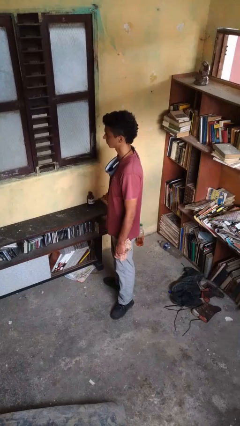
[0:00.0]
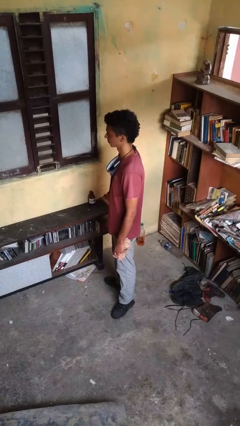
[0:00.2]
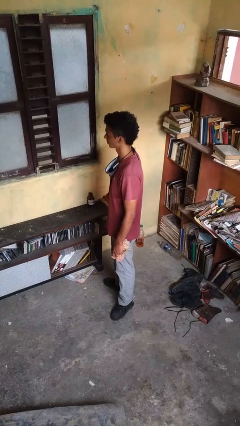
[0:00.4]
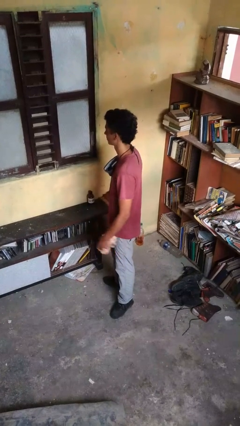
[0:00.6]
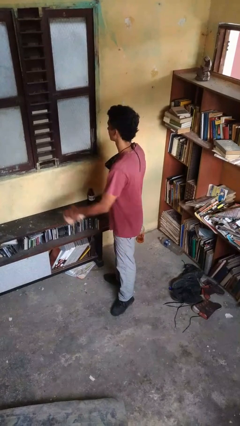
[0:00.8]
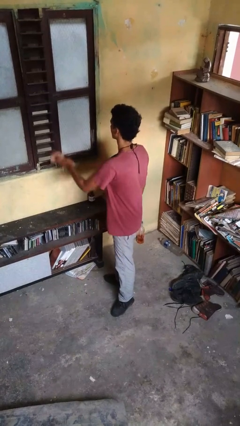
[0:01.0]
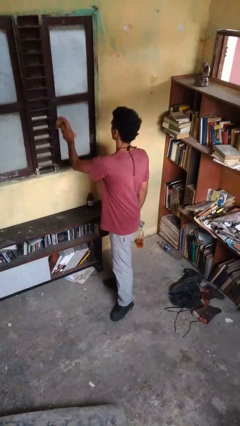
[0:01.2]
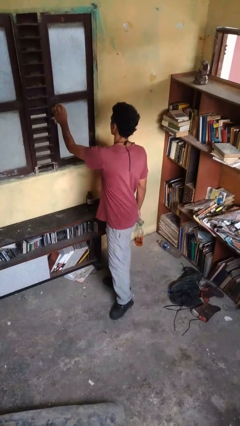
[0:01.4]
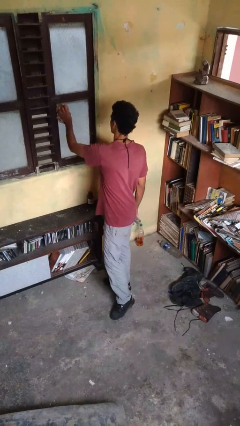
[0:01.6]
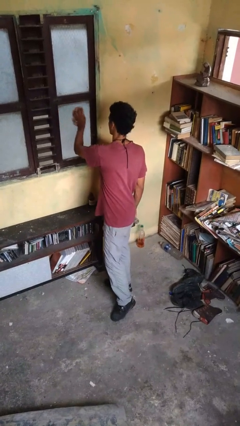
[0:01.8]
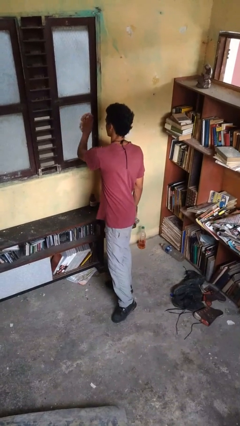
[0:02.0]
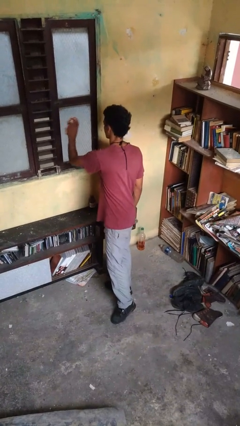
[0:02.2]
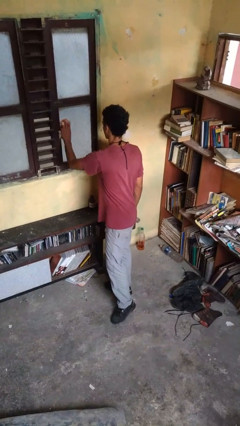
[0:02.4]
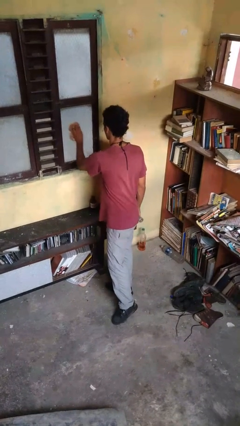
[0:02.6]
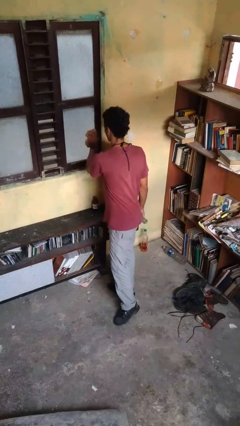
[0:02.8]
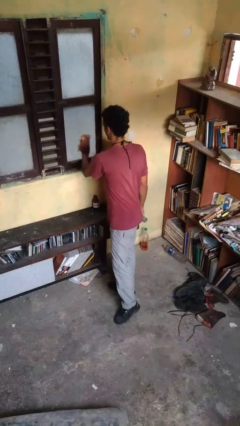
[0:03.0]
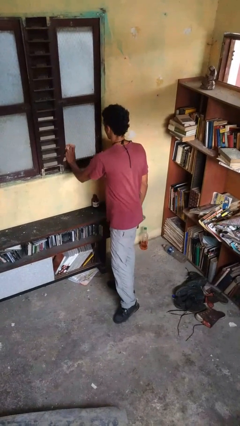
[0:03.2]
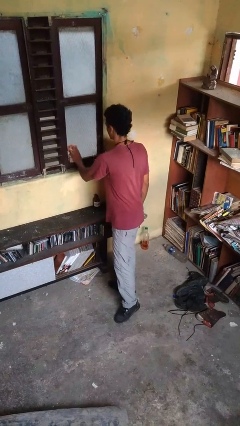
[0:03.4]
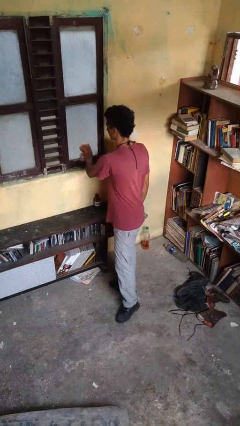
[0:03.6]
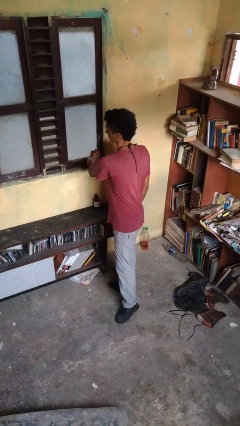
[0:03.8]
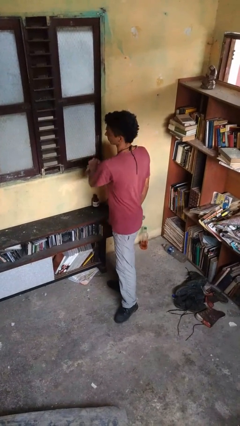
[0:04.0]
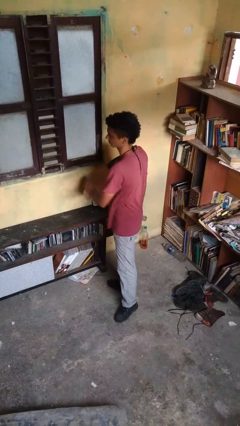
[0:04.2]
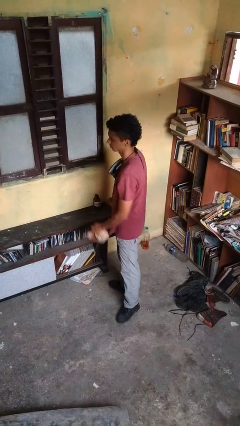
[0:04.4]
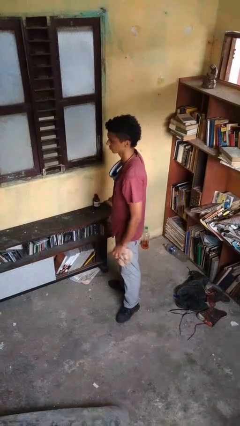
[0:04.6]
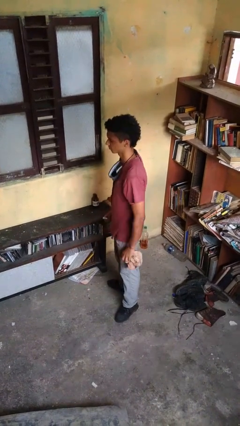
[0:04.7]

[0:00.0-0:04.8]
person washes window

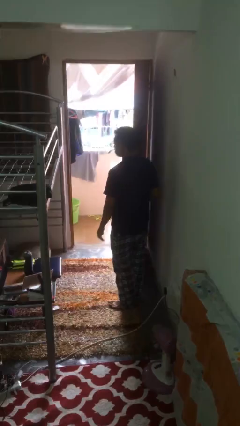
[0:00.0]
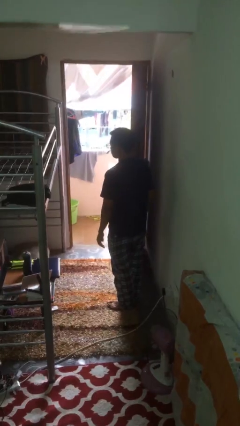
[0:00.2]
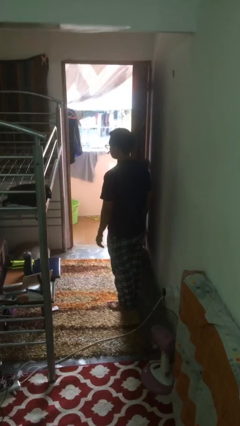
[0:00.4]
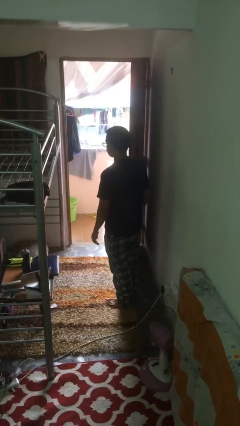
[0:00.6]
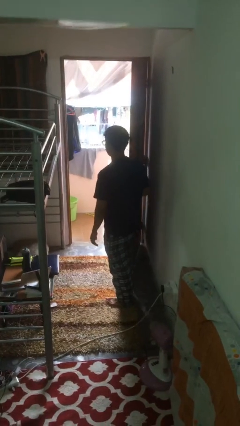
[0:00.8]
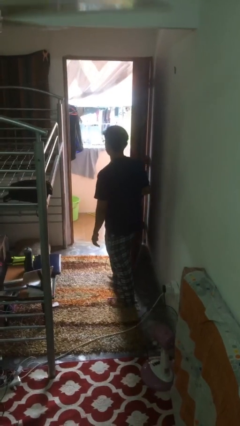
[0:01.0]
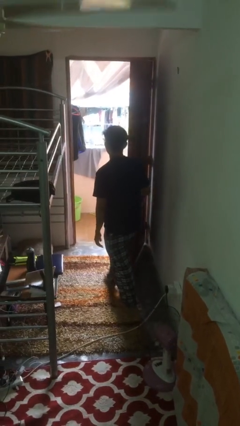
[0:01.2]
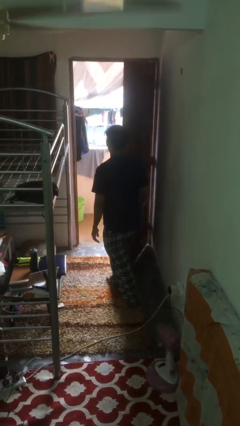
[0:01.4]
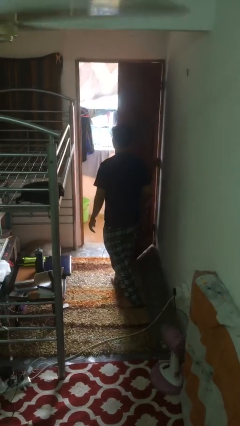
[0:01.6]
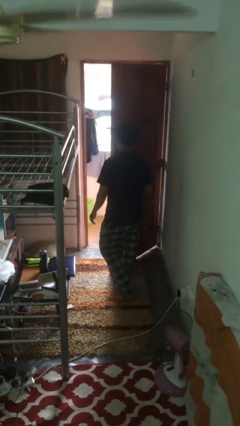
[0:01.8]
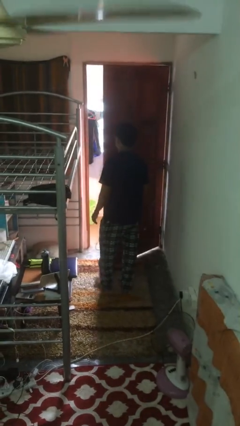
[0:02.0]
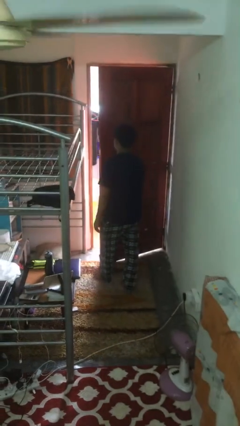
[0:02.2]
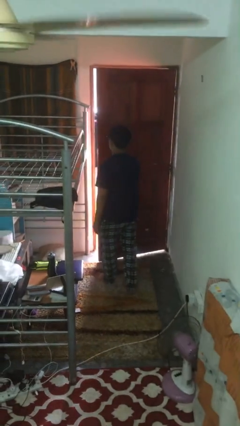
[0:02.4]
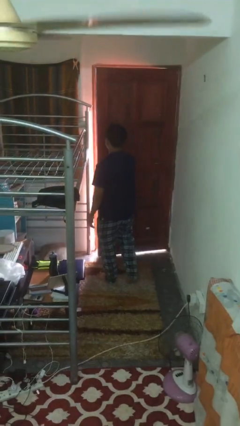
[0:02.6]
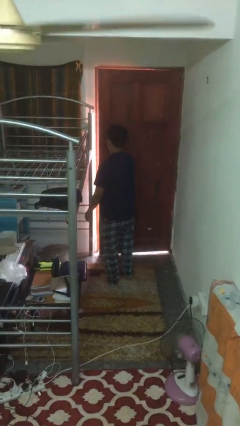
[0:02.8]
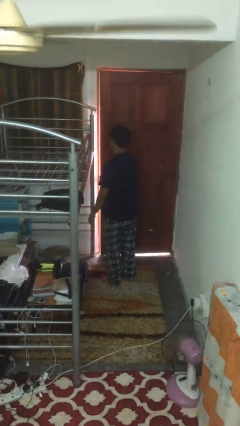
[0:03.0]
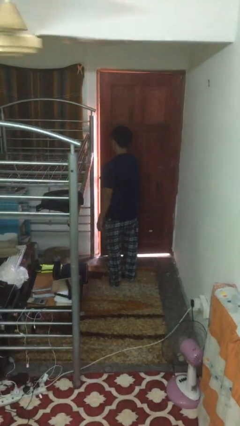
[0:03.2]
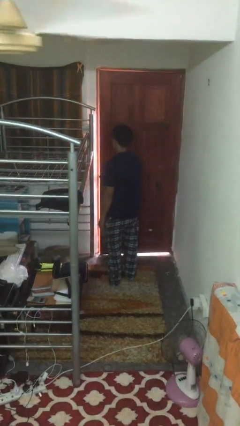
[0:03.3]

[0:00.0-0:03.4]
person closes facility door

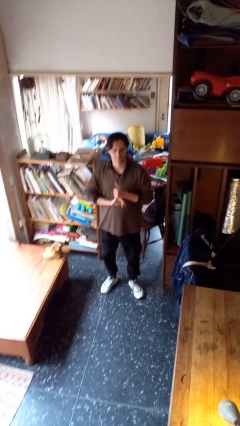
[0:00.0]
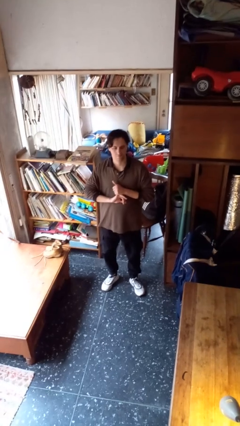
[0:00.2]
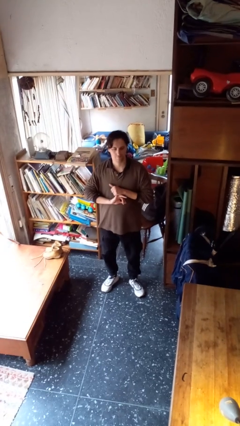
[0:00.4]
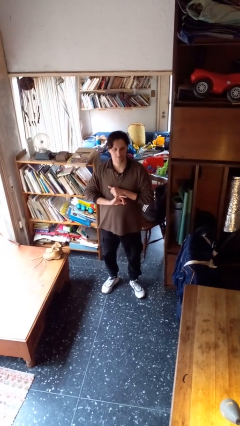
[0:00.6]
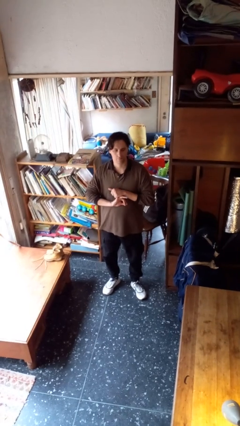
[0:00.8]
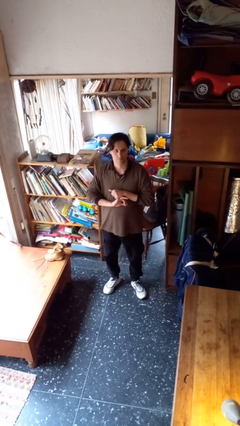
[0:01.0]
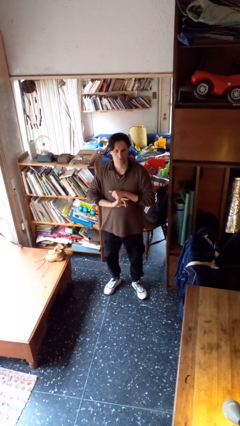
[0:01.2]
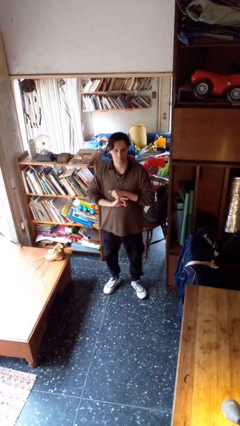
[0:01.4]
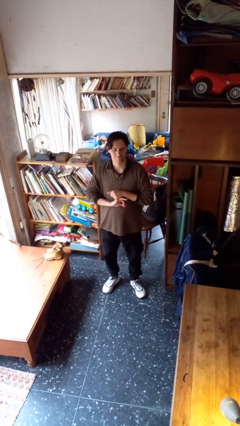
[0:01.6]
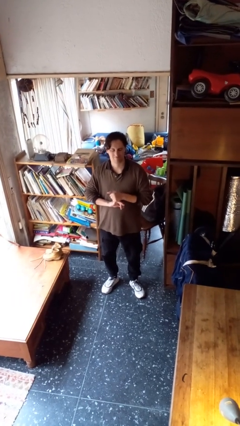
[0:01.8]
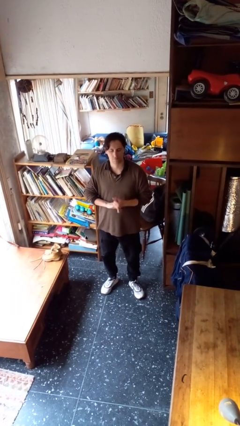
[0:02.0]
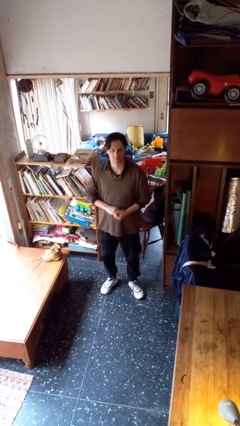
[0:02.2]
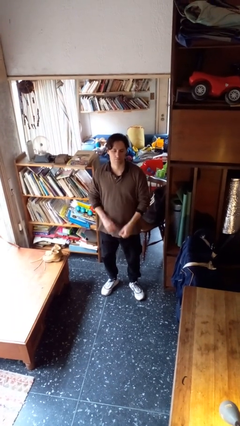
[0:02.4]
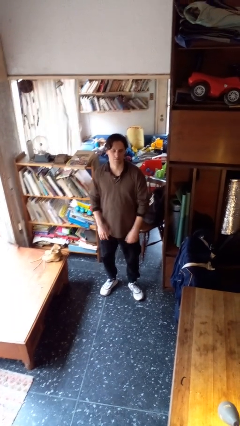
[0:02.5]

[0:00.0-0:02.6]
person cracks knuckles

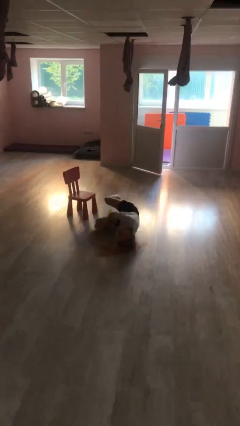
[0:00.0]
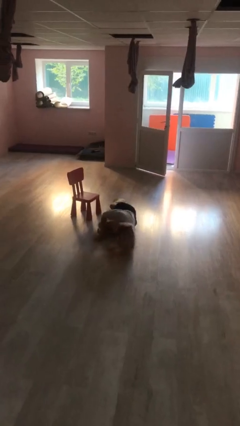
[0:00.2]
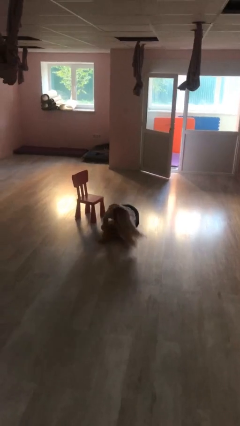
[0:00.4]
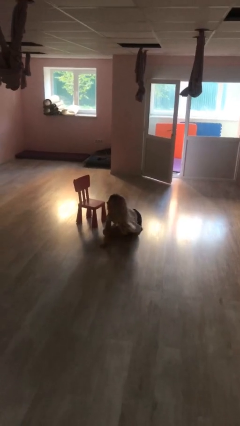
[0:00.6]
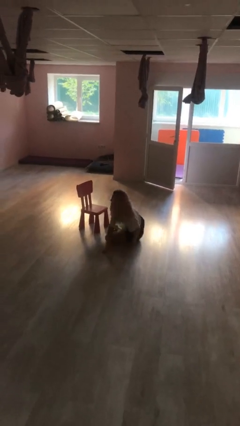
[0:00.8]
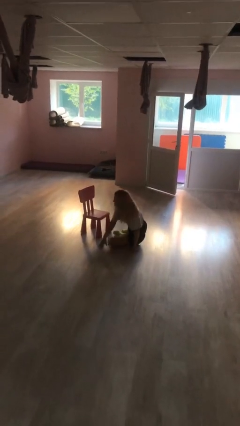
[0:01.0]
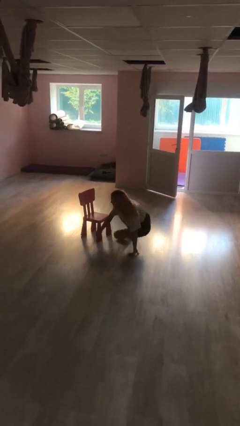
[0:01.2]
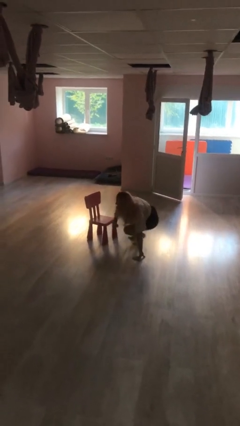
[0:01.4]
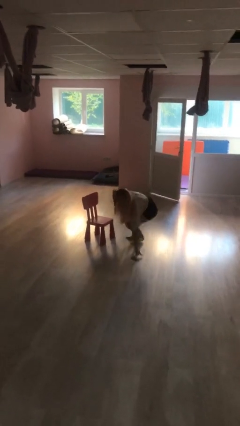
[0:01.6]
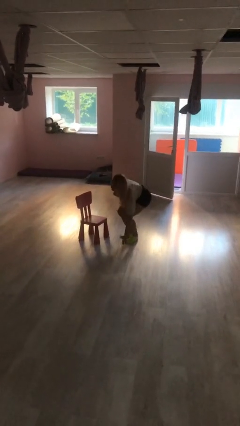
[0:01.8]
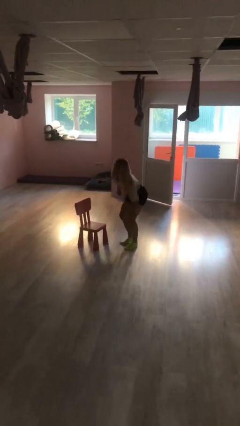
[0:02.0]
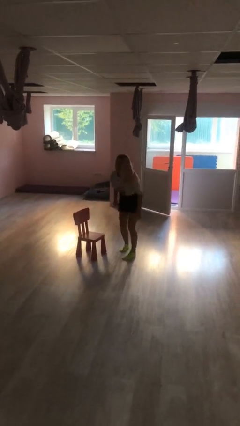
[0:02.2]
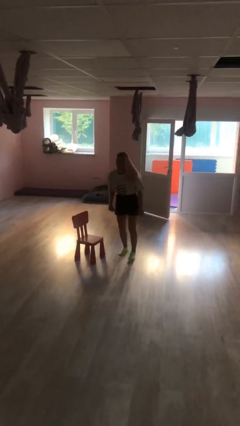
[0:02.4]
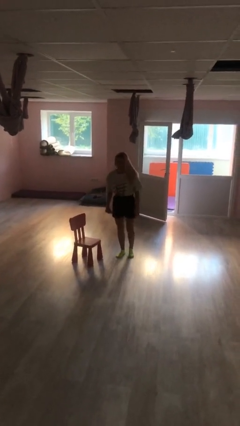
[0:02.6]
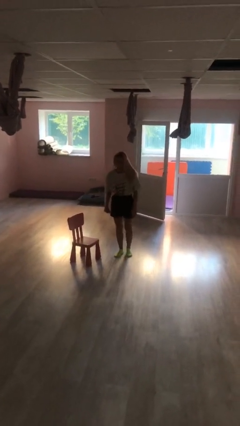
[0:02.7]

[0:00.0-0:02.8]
person stands up from floor

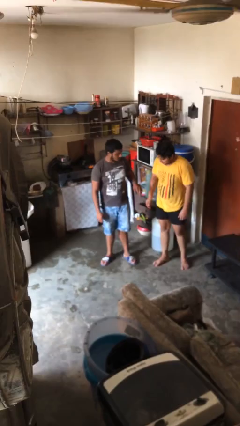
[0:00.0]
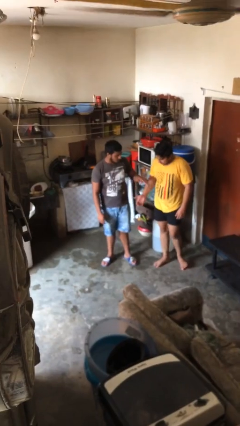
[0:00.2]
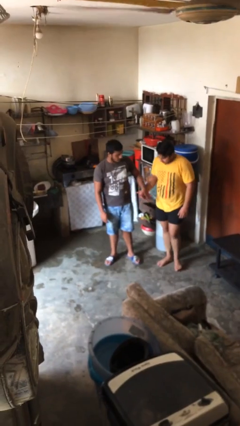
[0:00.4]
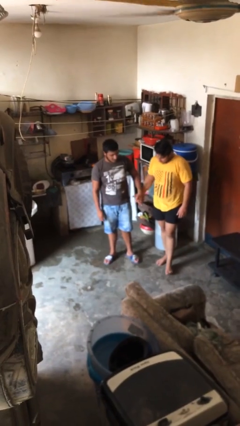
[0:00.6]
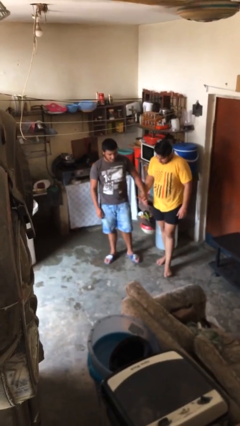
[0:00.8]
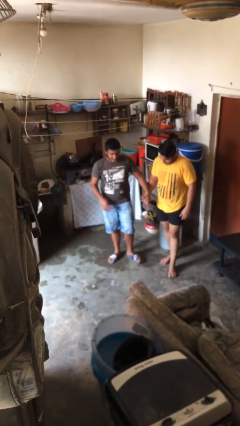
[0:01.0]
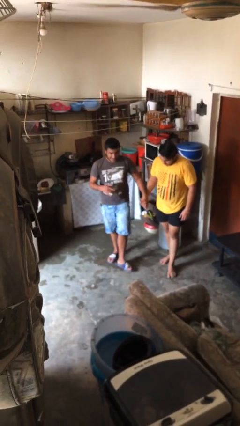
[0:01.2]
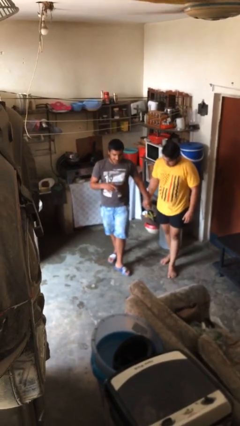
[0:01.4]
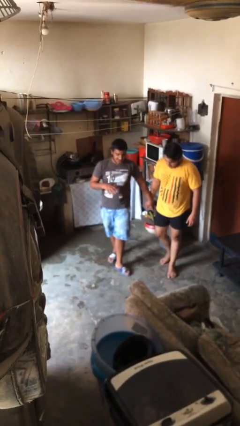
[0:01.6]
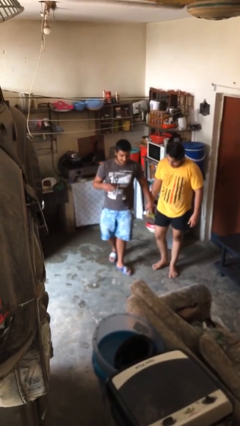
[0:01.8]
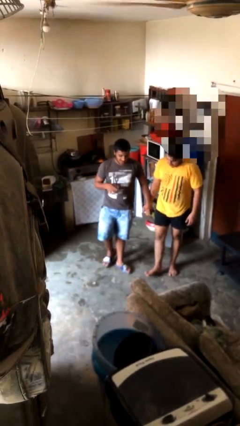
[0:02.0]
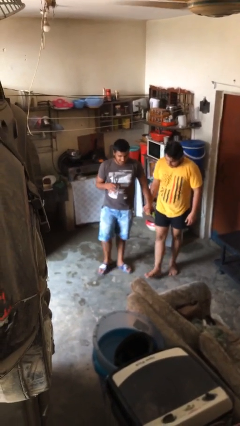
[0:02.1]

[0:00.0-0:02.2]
person holds hand

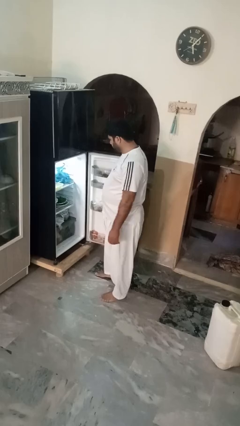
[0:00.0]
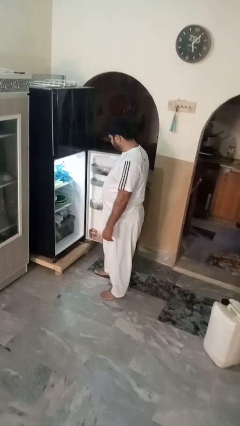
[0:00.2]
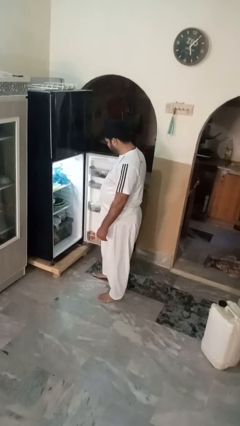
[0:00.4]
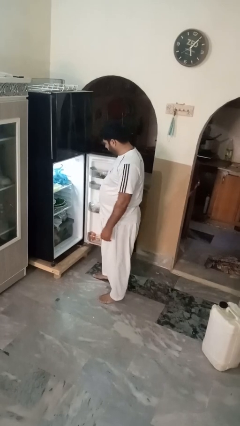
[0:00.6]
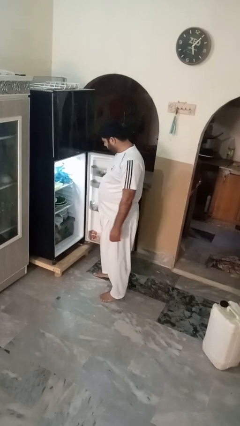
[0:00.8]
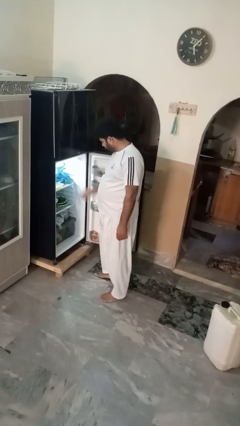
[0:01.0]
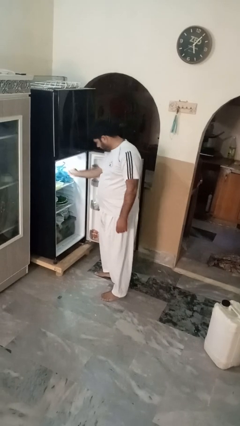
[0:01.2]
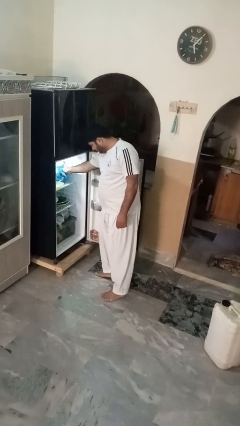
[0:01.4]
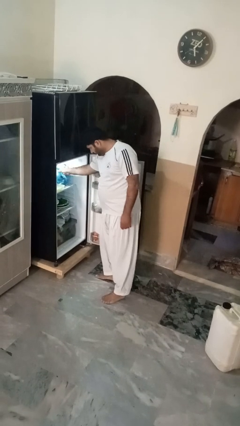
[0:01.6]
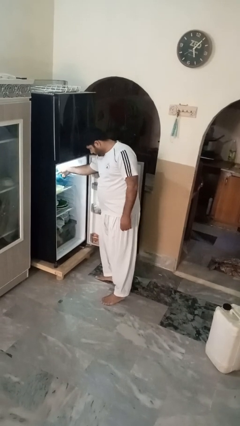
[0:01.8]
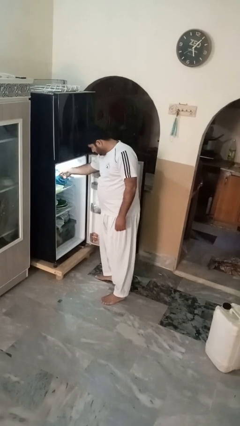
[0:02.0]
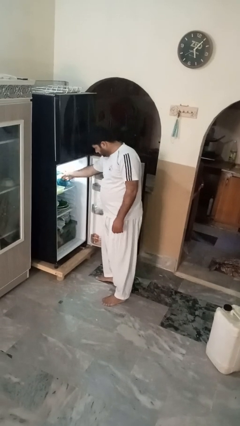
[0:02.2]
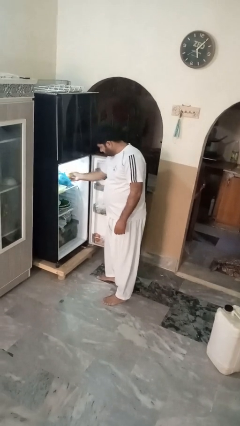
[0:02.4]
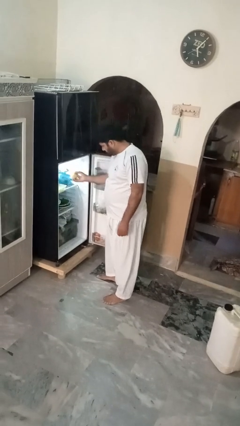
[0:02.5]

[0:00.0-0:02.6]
person takes object from refrigerator
